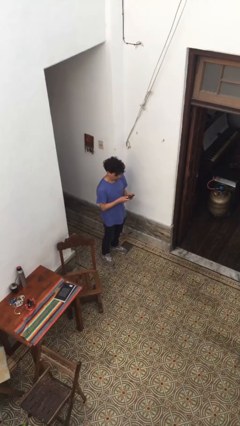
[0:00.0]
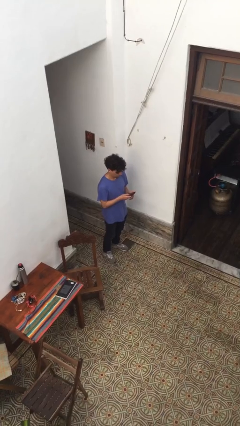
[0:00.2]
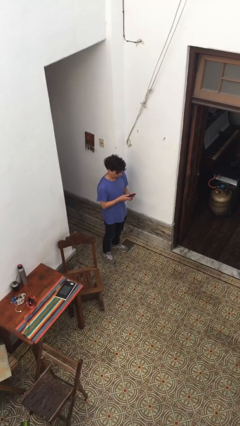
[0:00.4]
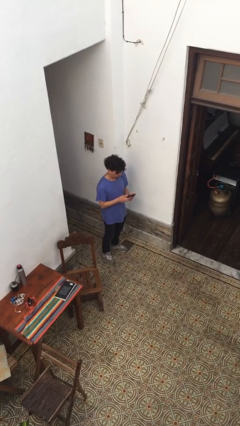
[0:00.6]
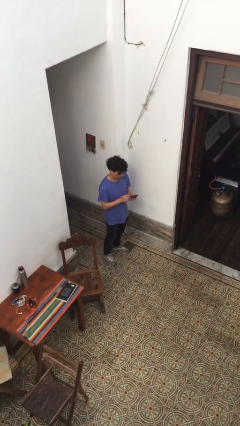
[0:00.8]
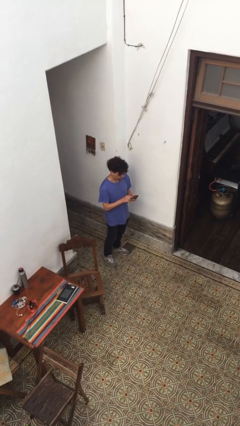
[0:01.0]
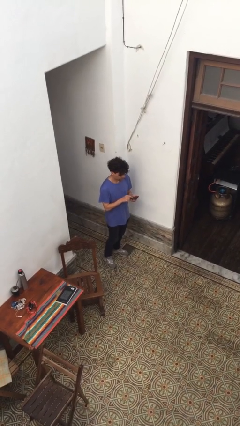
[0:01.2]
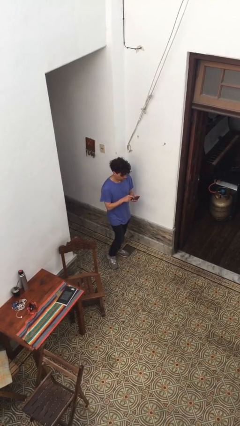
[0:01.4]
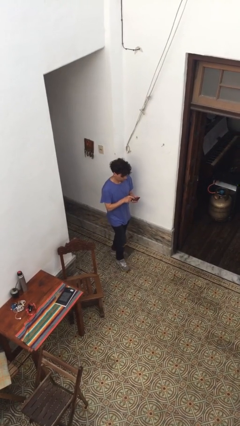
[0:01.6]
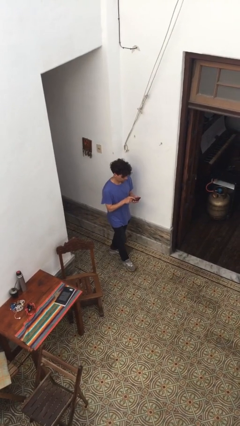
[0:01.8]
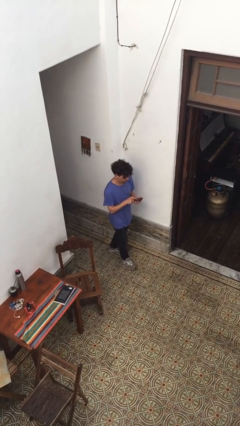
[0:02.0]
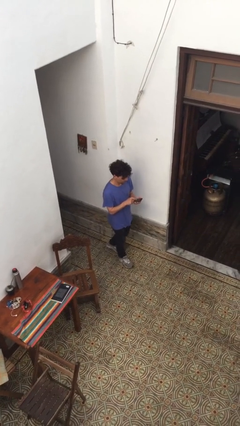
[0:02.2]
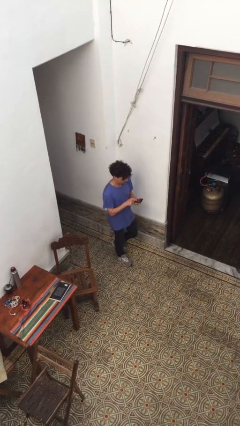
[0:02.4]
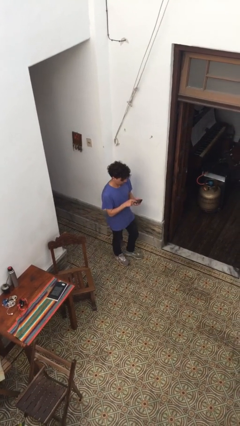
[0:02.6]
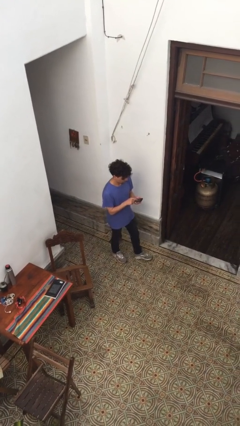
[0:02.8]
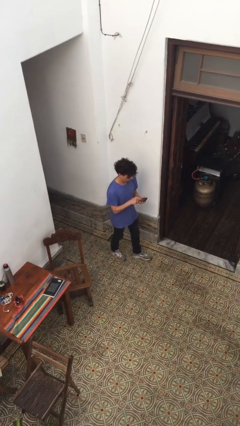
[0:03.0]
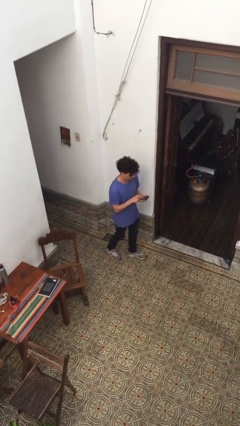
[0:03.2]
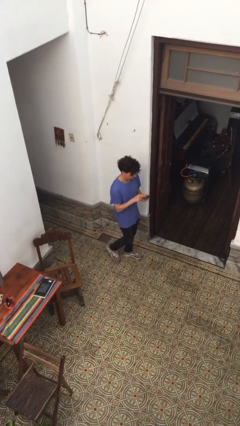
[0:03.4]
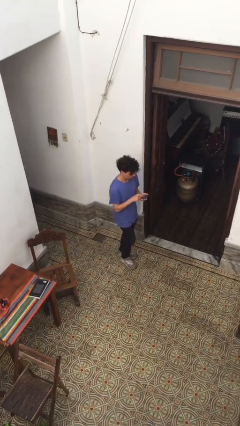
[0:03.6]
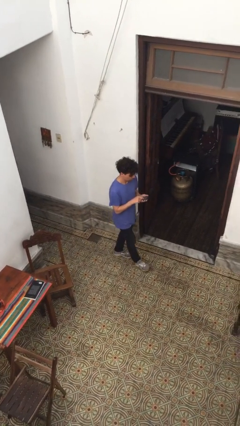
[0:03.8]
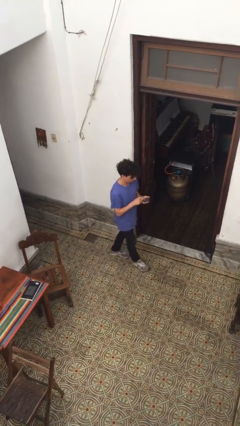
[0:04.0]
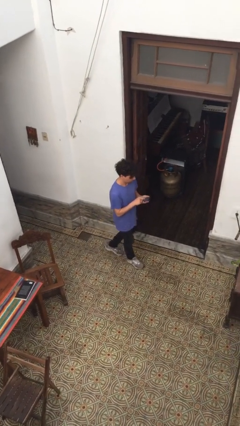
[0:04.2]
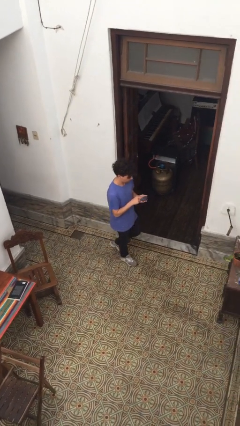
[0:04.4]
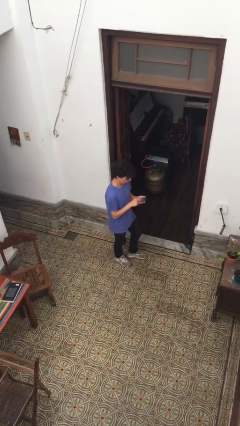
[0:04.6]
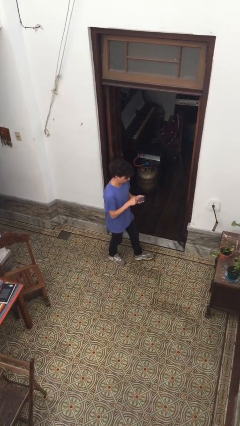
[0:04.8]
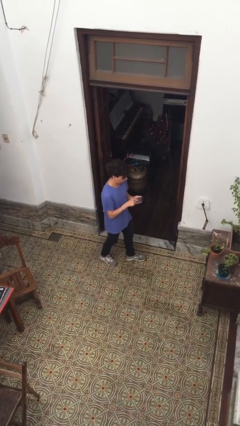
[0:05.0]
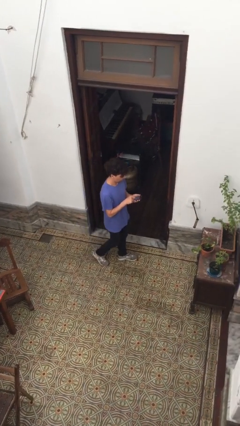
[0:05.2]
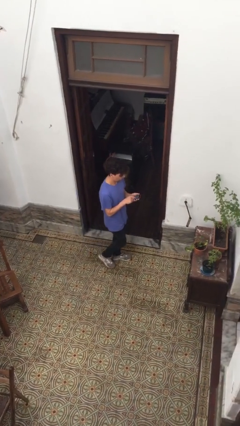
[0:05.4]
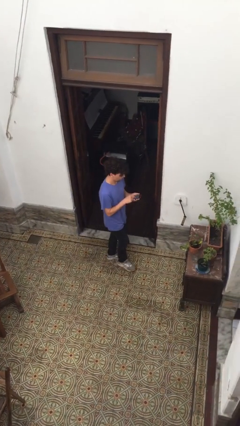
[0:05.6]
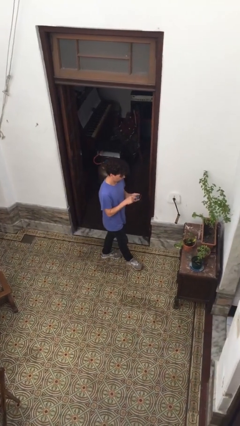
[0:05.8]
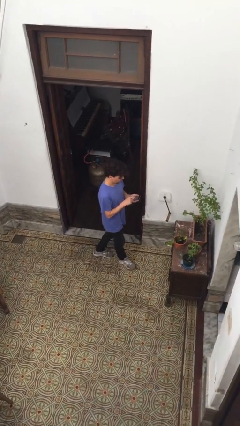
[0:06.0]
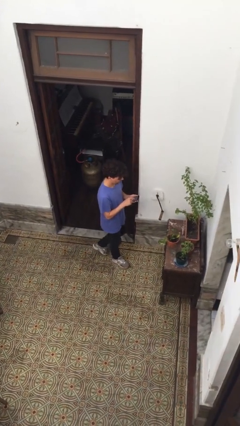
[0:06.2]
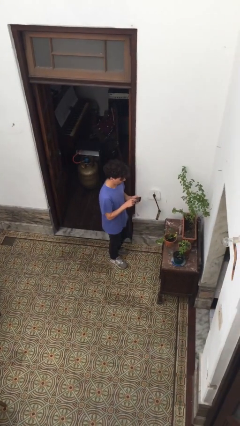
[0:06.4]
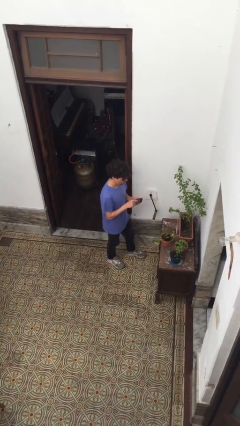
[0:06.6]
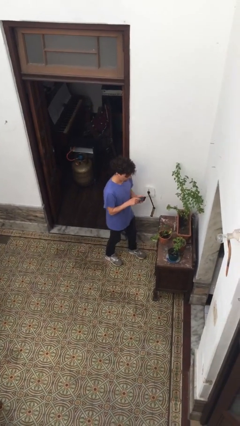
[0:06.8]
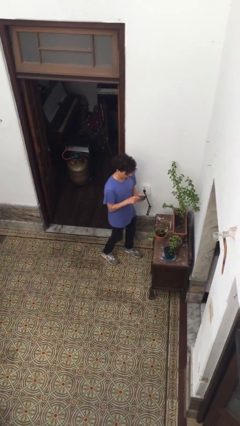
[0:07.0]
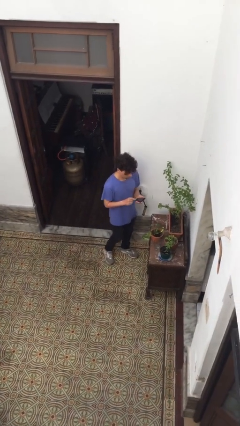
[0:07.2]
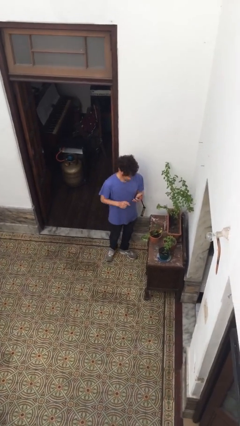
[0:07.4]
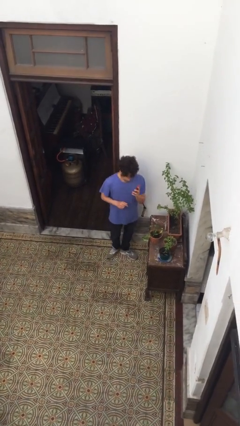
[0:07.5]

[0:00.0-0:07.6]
person texts on phone

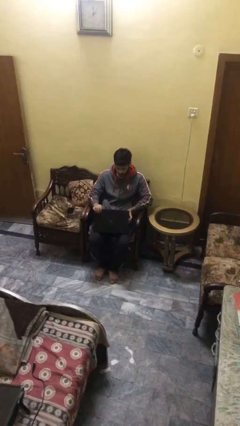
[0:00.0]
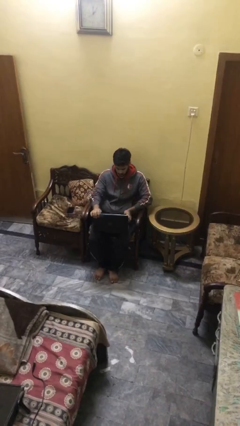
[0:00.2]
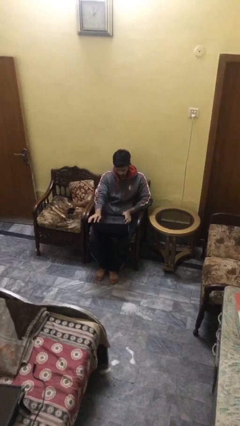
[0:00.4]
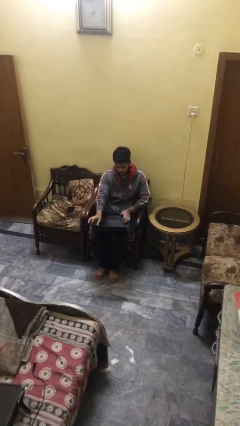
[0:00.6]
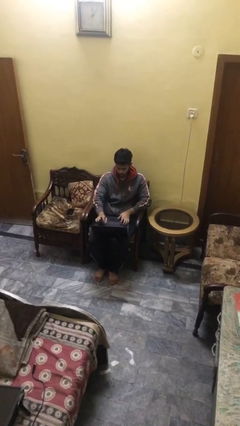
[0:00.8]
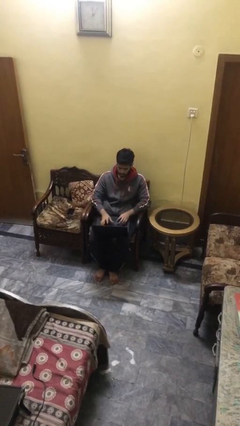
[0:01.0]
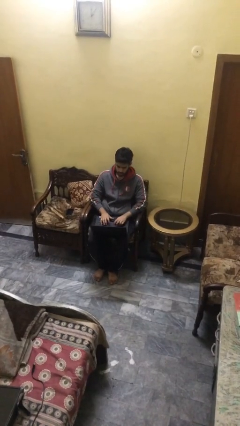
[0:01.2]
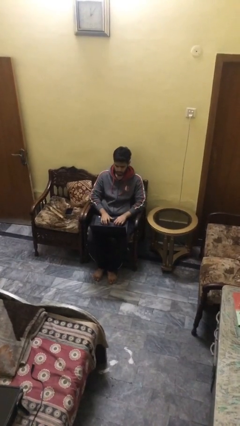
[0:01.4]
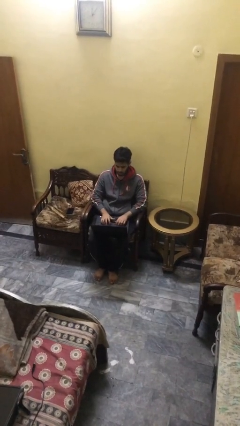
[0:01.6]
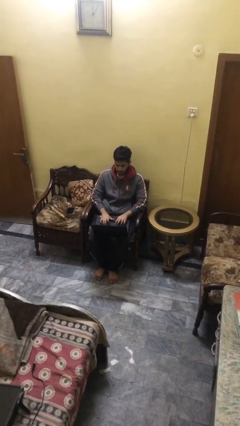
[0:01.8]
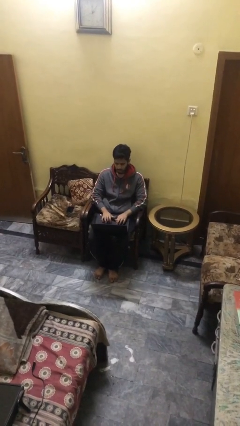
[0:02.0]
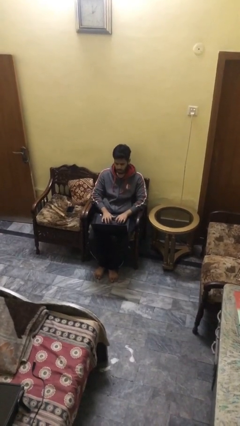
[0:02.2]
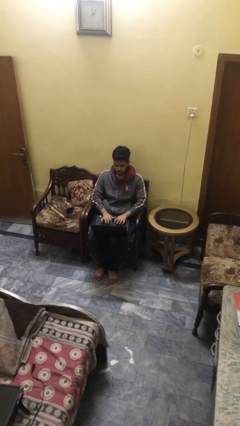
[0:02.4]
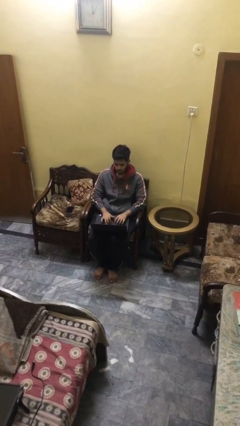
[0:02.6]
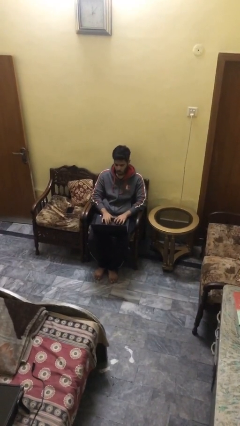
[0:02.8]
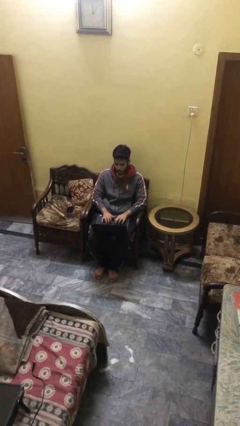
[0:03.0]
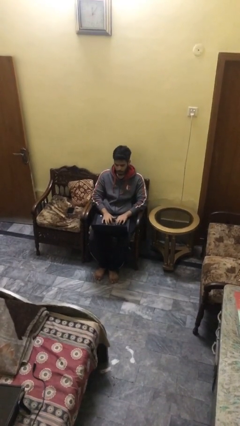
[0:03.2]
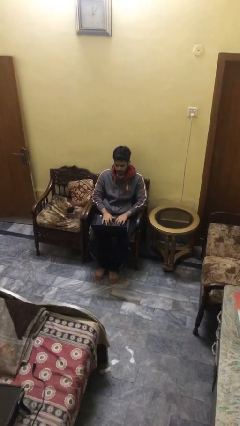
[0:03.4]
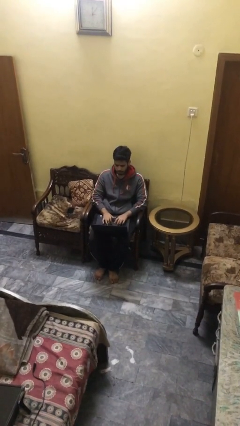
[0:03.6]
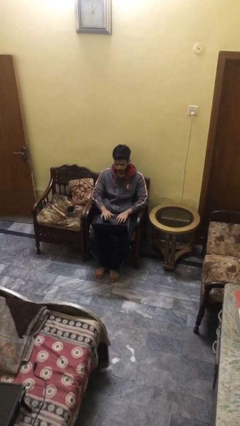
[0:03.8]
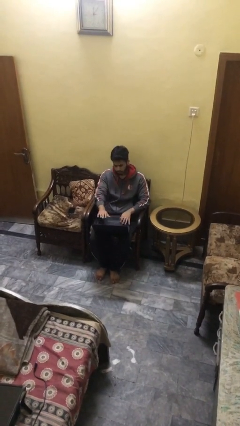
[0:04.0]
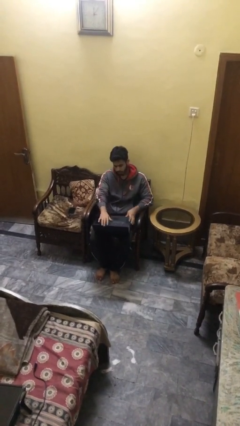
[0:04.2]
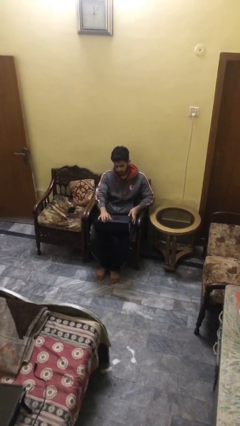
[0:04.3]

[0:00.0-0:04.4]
person interacts with laptop

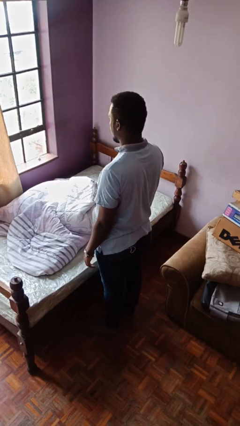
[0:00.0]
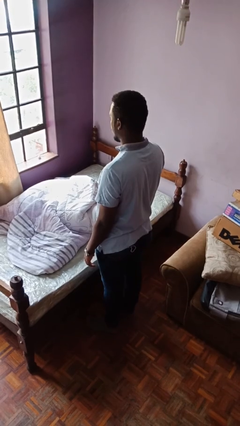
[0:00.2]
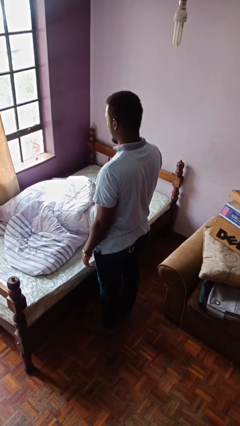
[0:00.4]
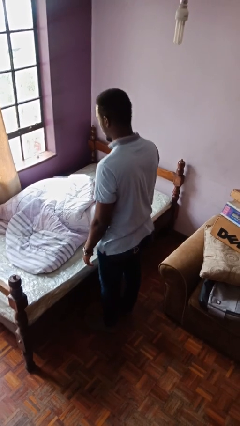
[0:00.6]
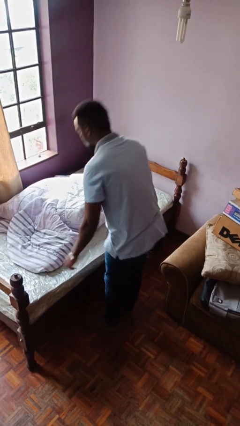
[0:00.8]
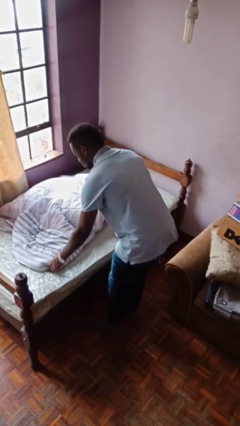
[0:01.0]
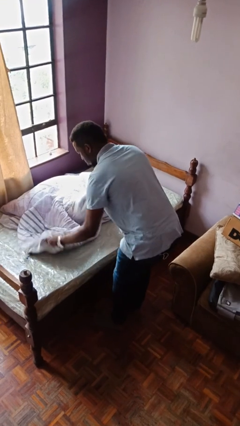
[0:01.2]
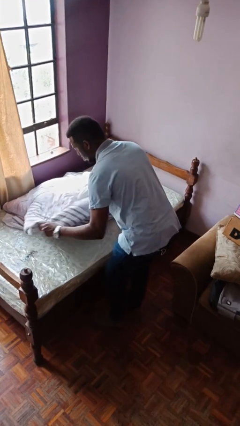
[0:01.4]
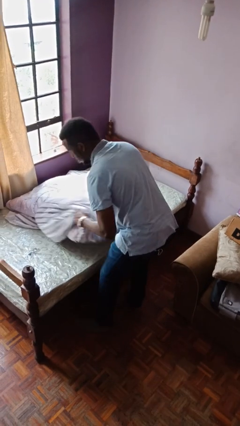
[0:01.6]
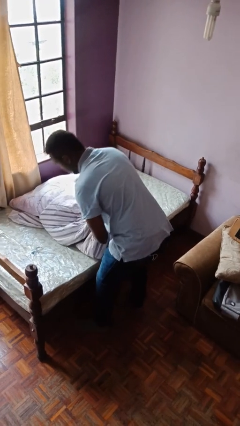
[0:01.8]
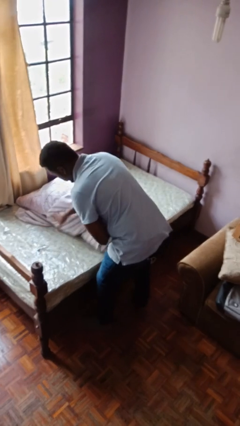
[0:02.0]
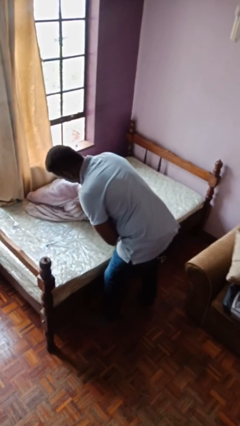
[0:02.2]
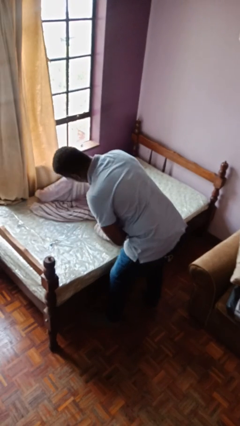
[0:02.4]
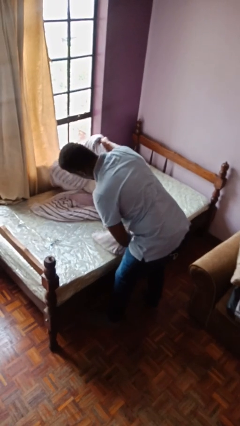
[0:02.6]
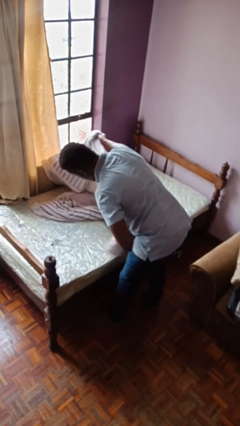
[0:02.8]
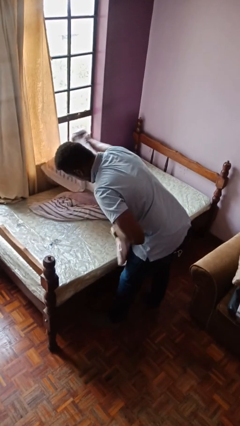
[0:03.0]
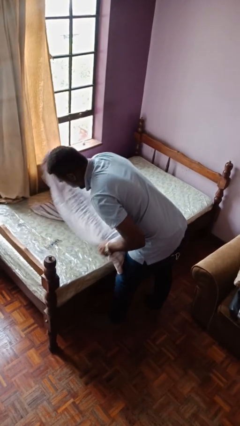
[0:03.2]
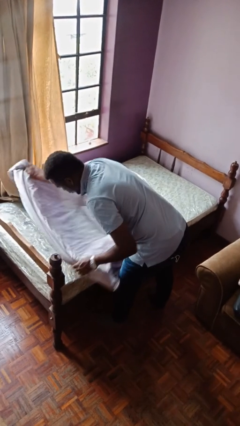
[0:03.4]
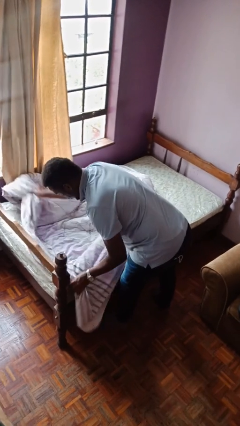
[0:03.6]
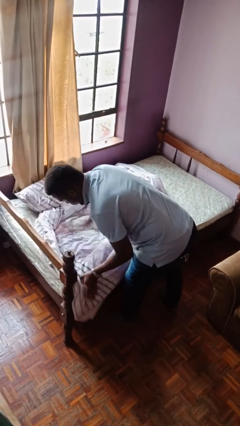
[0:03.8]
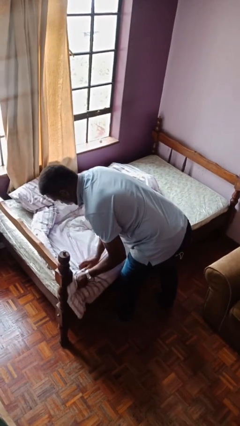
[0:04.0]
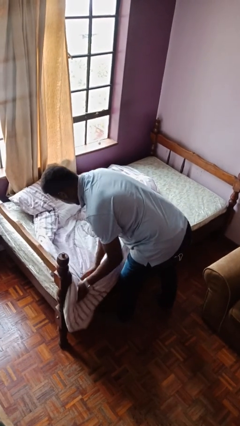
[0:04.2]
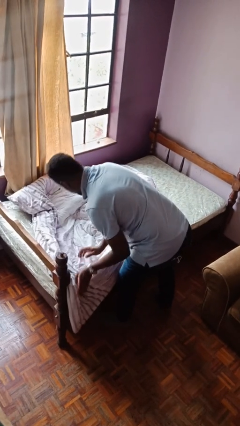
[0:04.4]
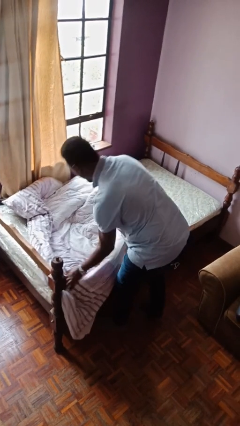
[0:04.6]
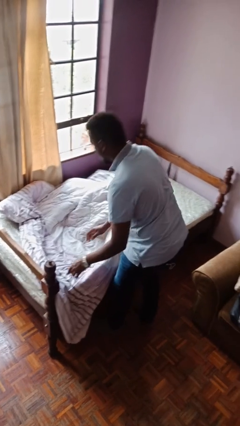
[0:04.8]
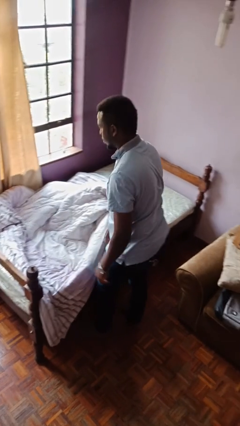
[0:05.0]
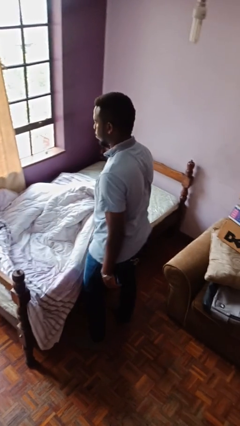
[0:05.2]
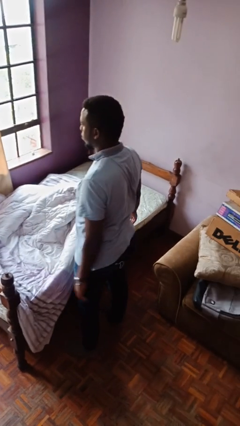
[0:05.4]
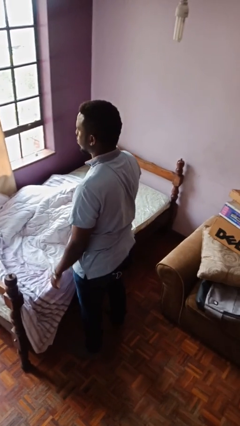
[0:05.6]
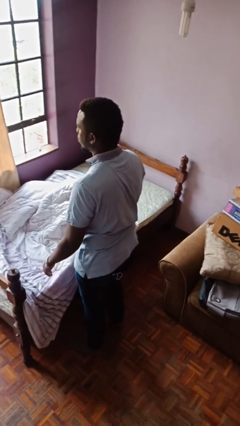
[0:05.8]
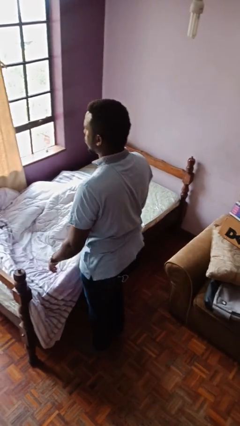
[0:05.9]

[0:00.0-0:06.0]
person makes bed
